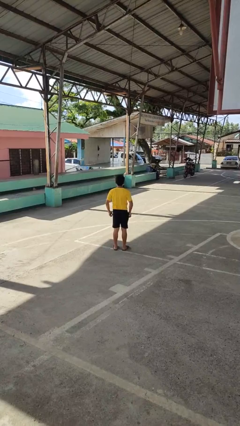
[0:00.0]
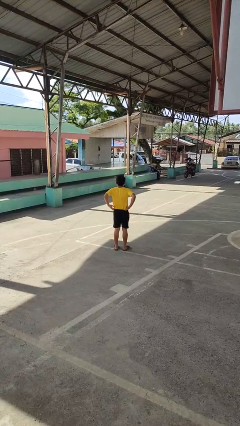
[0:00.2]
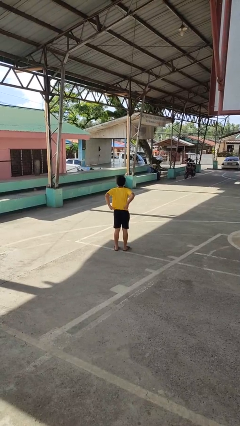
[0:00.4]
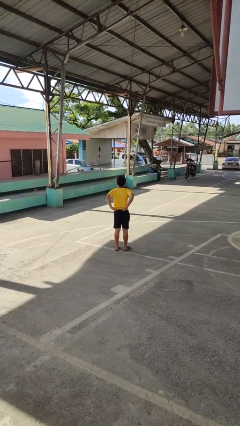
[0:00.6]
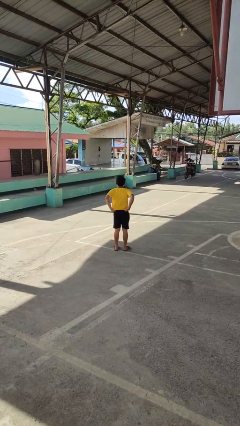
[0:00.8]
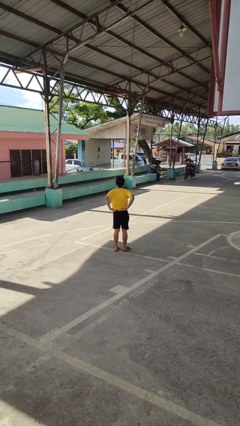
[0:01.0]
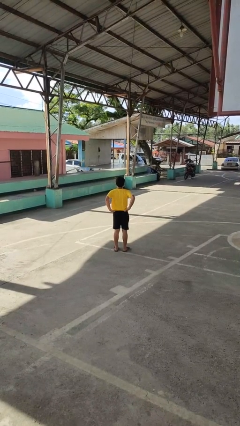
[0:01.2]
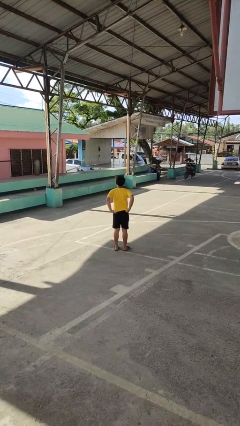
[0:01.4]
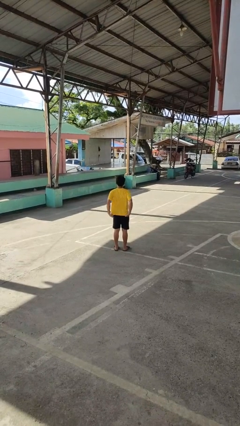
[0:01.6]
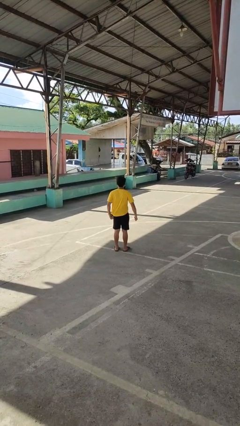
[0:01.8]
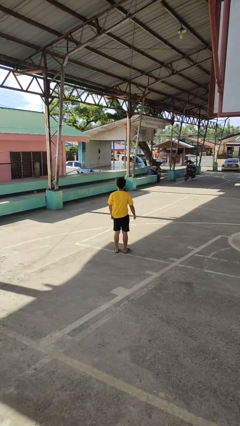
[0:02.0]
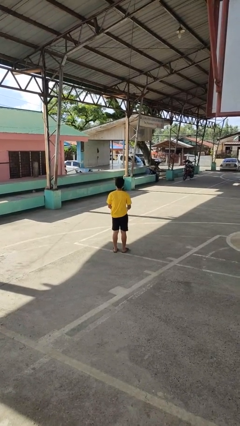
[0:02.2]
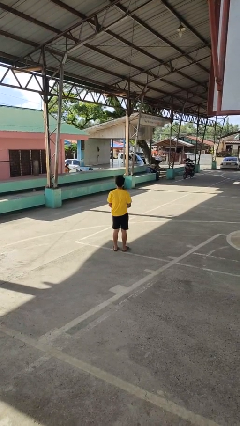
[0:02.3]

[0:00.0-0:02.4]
person untucks shirt

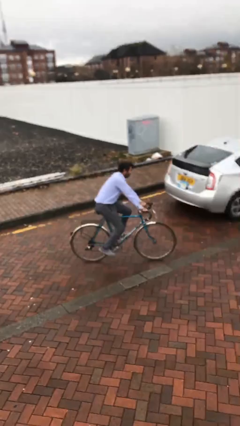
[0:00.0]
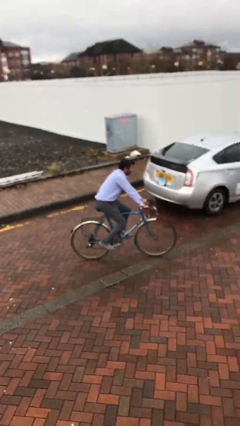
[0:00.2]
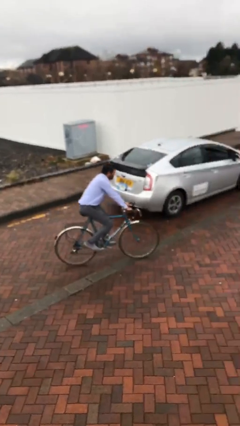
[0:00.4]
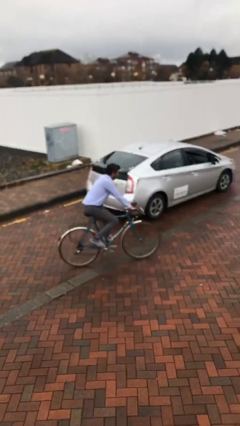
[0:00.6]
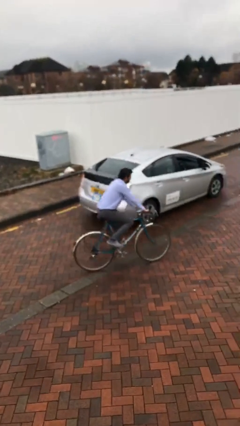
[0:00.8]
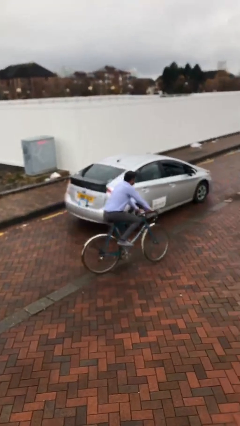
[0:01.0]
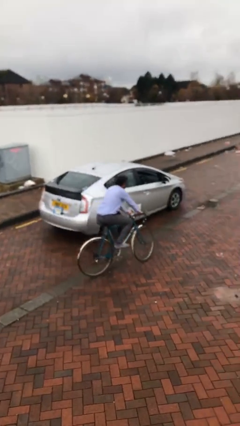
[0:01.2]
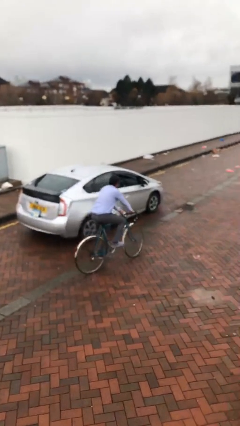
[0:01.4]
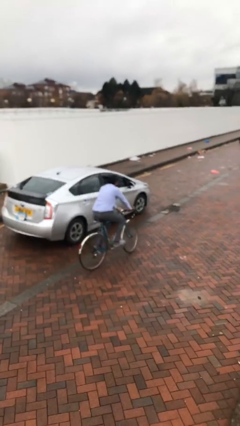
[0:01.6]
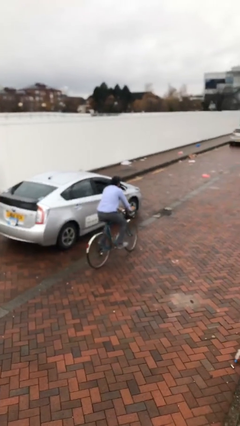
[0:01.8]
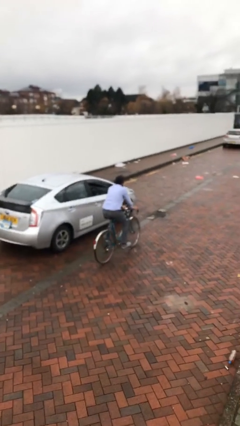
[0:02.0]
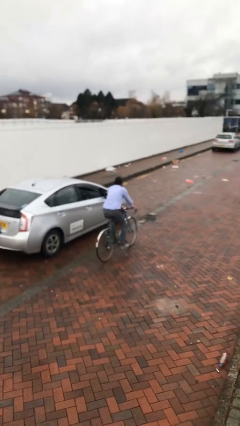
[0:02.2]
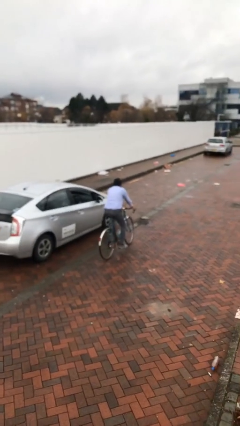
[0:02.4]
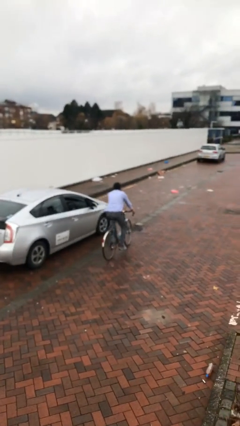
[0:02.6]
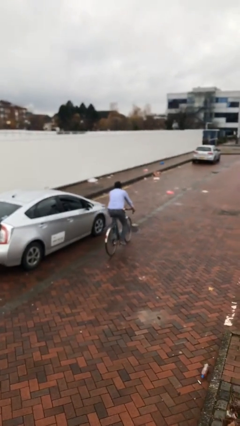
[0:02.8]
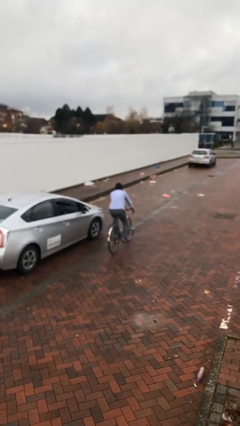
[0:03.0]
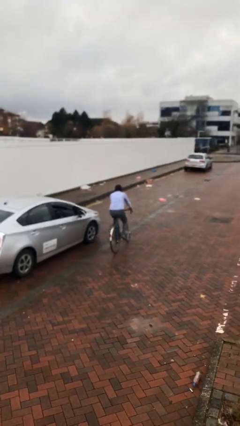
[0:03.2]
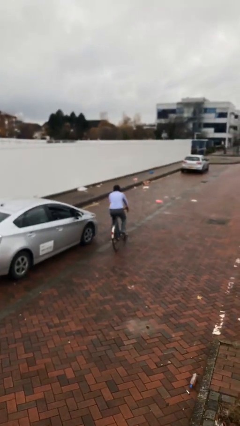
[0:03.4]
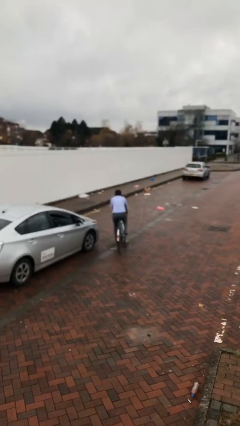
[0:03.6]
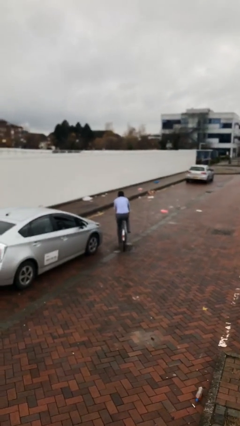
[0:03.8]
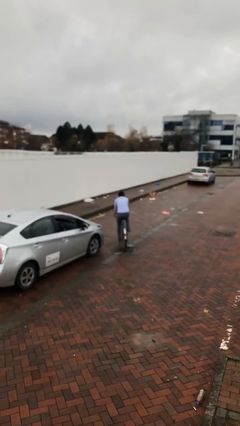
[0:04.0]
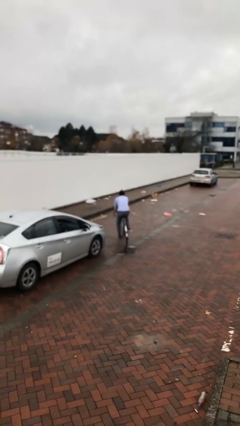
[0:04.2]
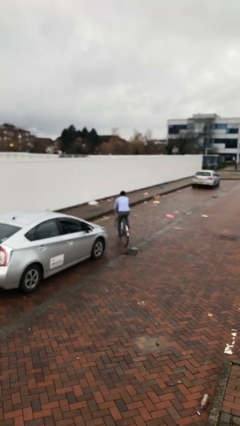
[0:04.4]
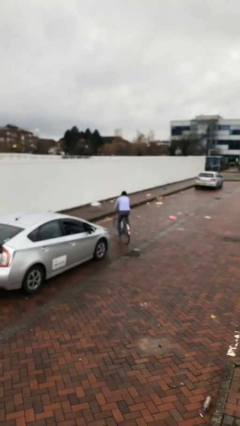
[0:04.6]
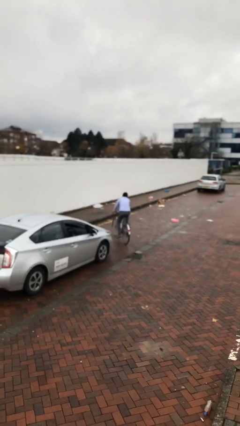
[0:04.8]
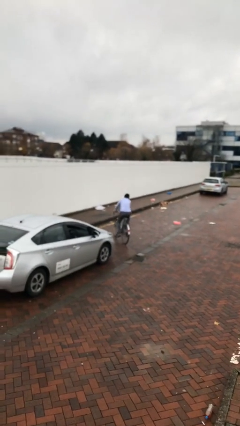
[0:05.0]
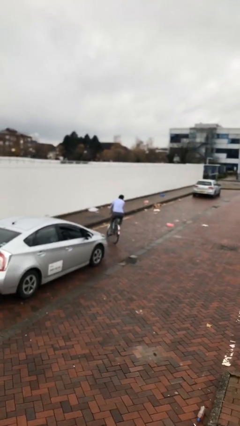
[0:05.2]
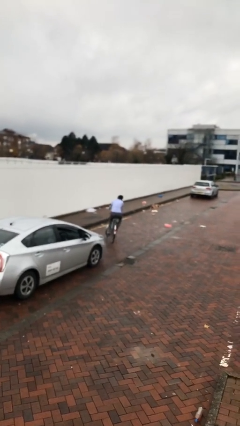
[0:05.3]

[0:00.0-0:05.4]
person rides bicycle

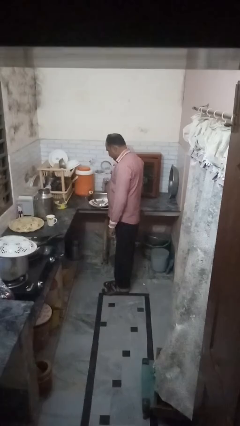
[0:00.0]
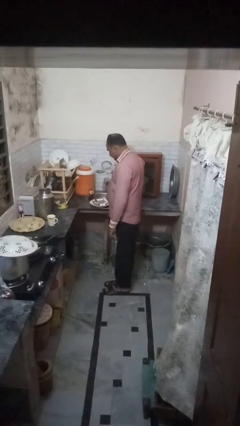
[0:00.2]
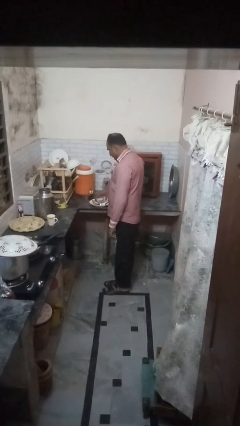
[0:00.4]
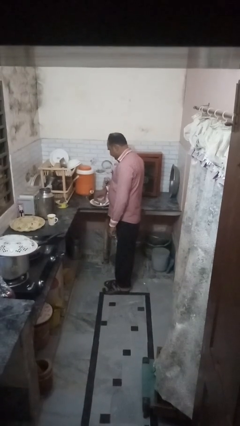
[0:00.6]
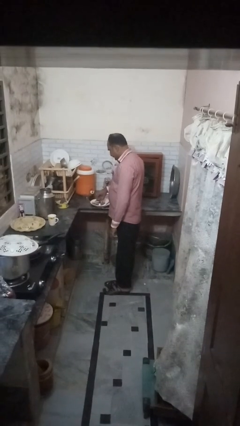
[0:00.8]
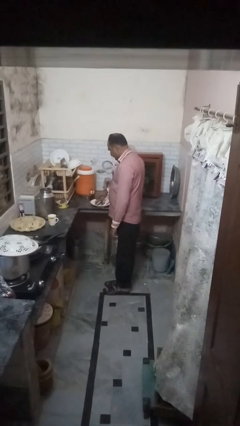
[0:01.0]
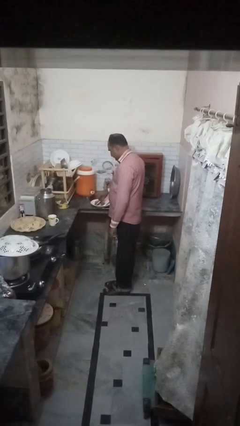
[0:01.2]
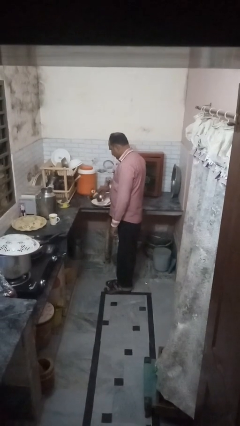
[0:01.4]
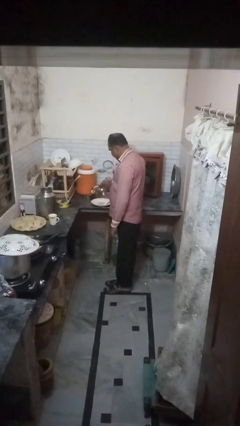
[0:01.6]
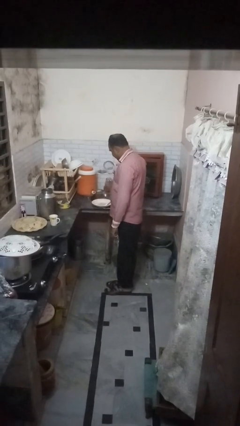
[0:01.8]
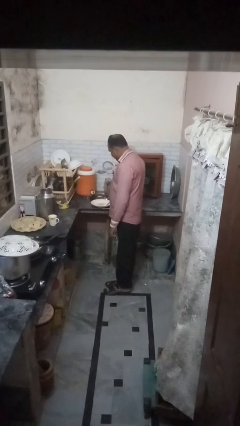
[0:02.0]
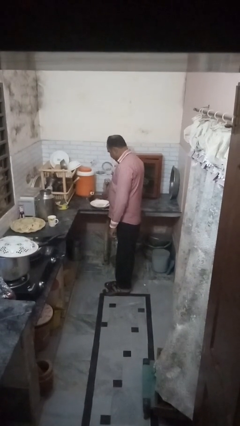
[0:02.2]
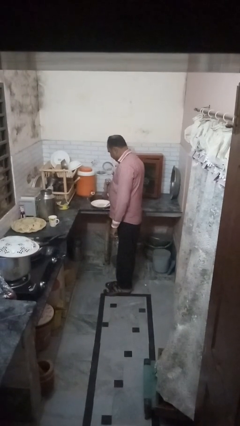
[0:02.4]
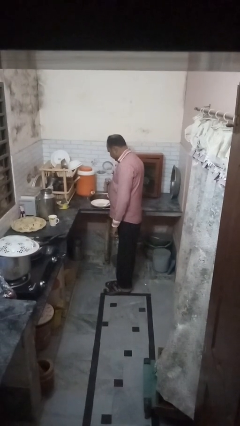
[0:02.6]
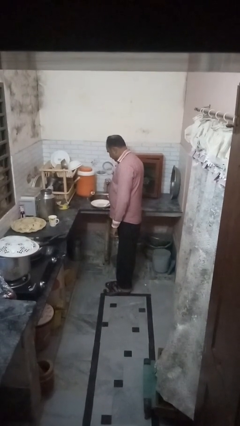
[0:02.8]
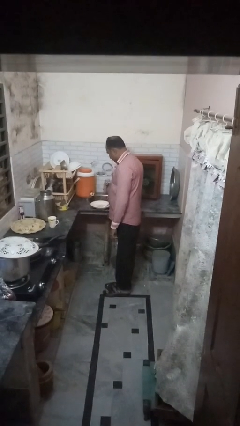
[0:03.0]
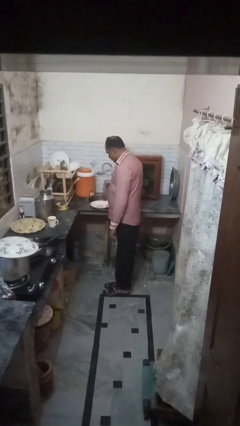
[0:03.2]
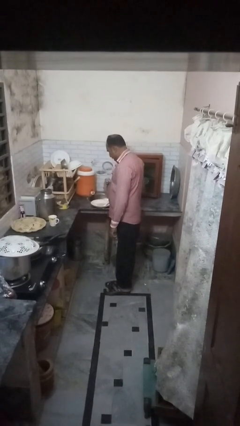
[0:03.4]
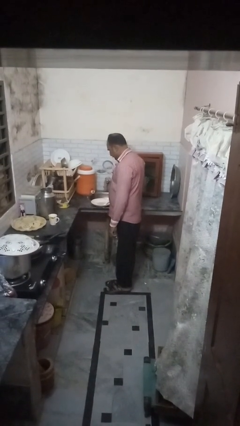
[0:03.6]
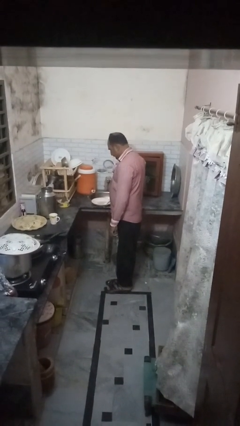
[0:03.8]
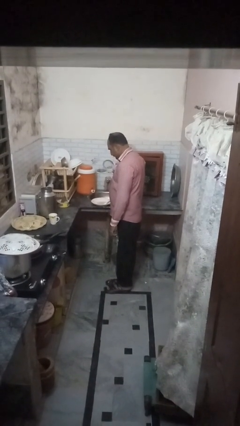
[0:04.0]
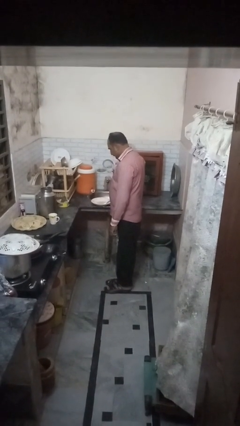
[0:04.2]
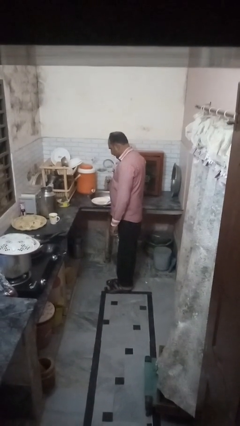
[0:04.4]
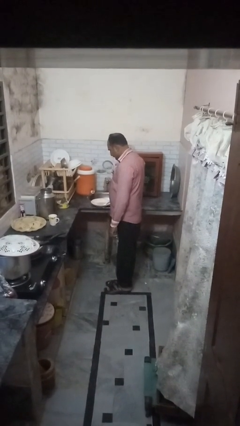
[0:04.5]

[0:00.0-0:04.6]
person loads dishwasher

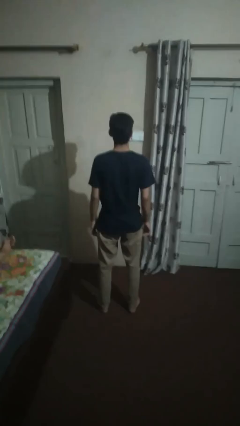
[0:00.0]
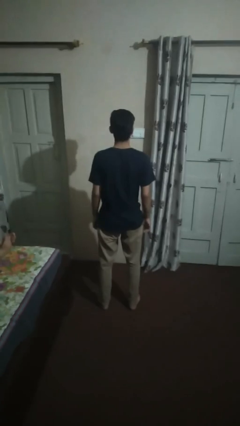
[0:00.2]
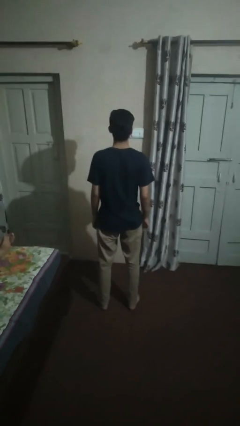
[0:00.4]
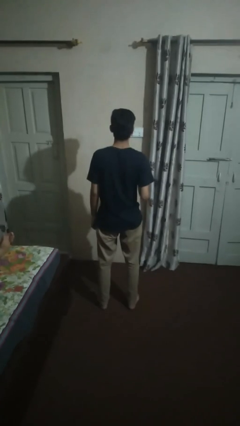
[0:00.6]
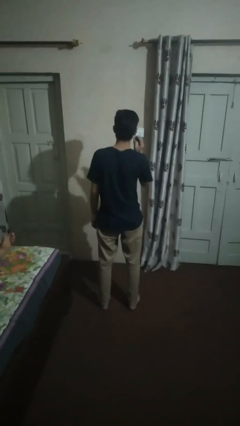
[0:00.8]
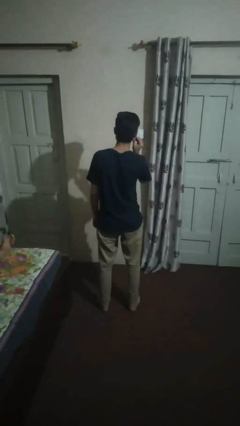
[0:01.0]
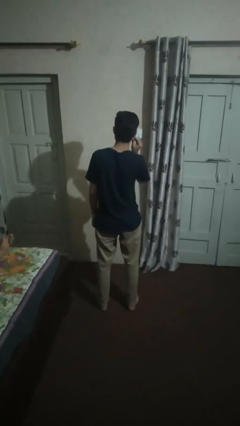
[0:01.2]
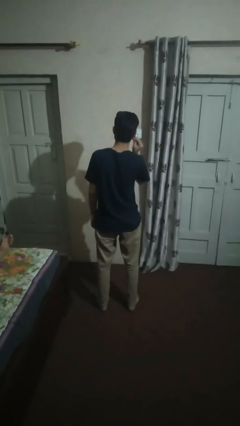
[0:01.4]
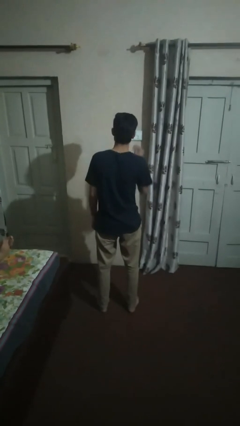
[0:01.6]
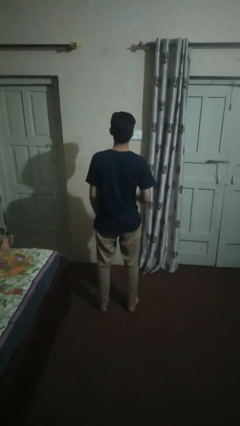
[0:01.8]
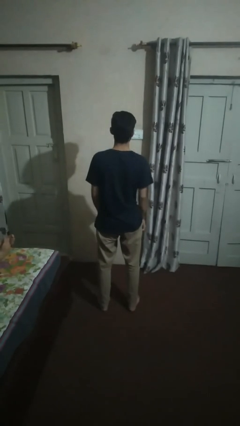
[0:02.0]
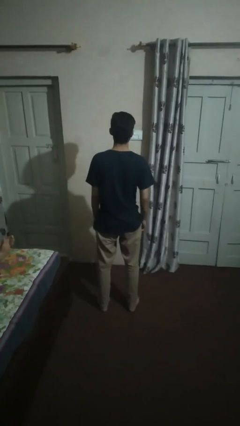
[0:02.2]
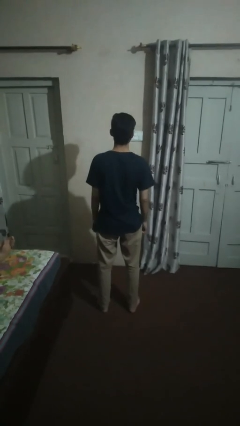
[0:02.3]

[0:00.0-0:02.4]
person takes off earrings

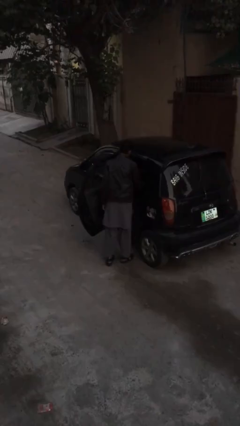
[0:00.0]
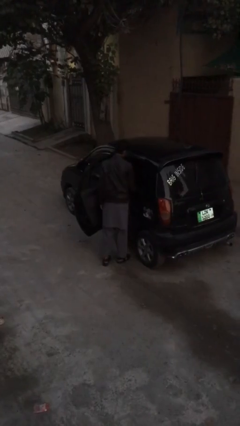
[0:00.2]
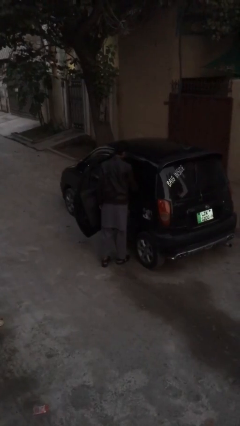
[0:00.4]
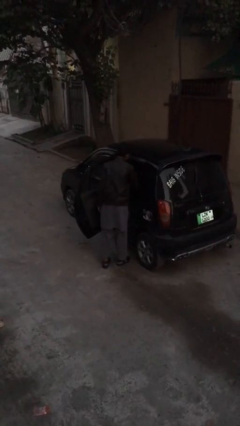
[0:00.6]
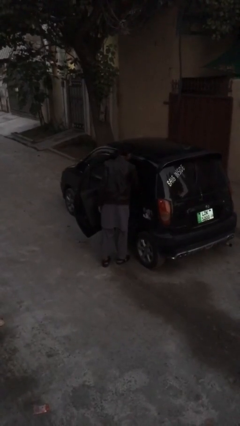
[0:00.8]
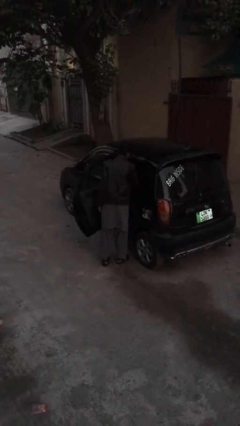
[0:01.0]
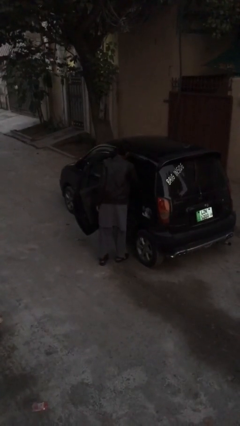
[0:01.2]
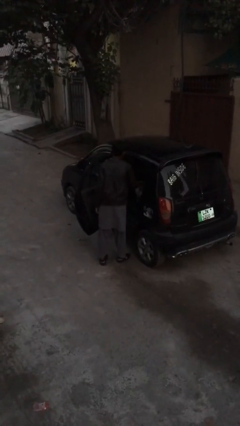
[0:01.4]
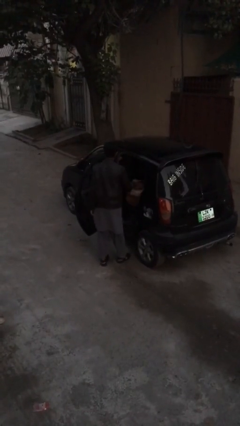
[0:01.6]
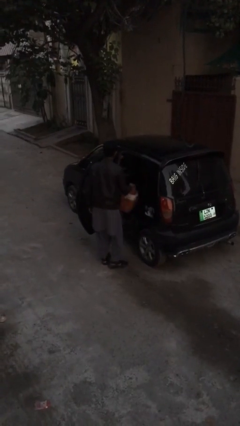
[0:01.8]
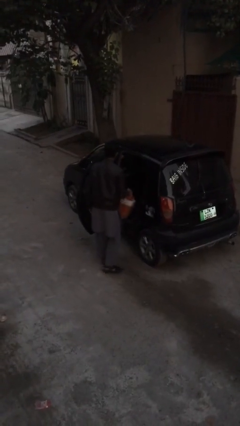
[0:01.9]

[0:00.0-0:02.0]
person unloads car

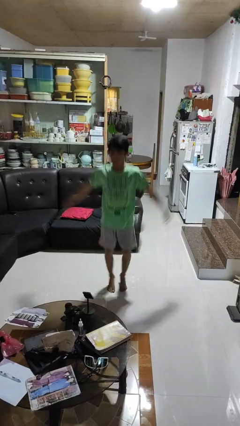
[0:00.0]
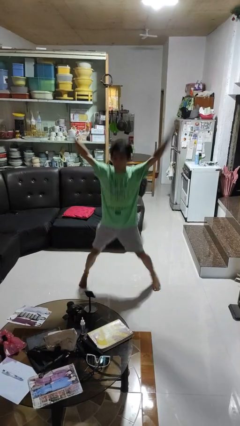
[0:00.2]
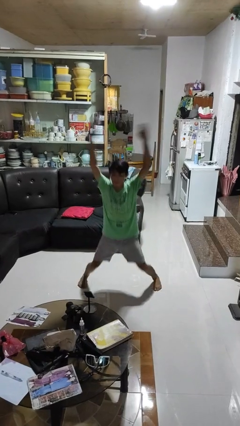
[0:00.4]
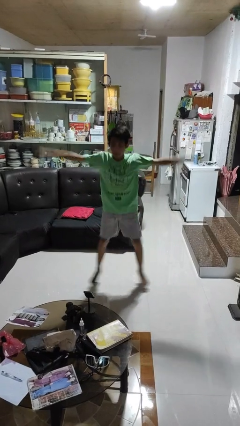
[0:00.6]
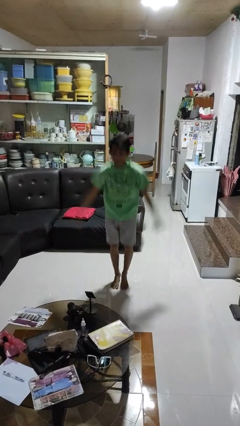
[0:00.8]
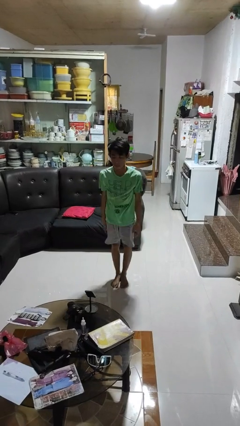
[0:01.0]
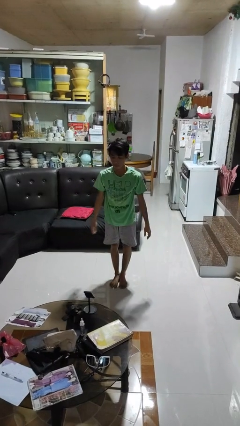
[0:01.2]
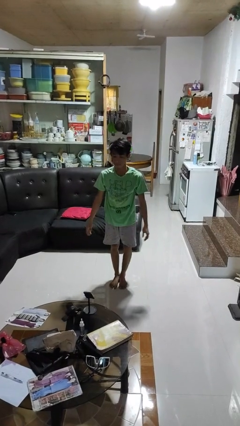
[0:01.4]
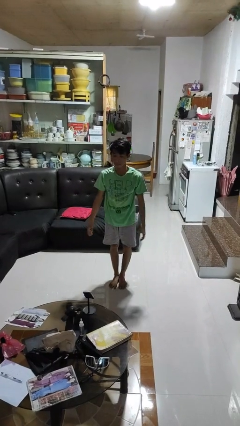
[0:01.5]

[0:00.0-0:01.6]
person exercises with jumping jacks
